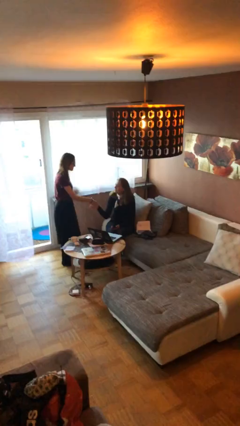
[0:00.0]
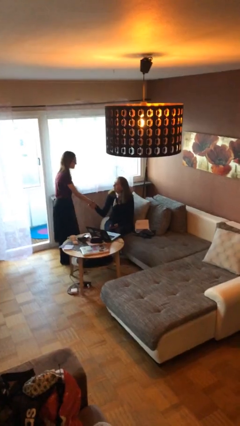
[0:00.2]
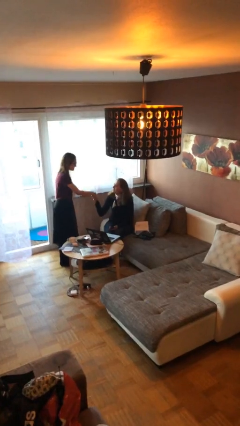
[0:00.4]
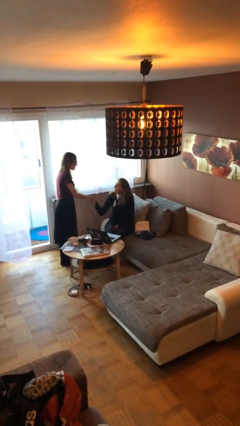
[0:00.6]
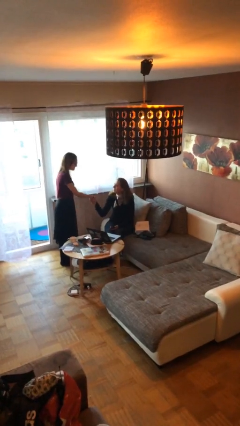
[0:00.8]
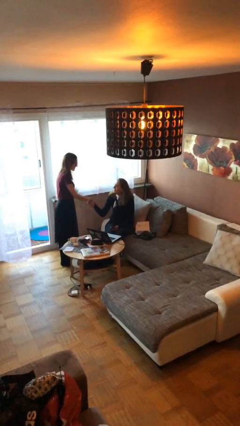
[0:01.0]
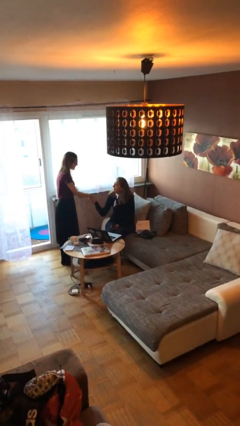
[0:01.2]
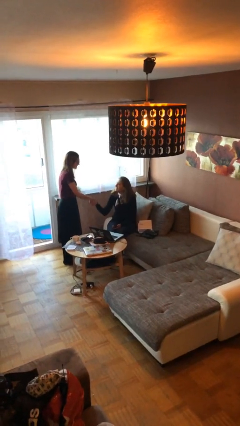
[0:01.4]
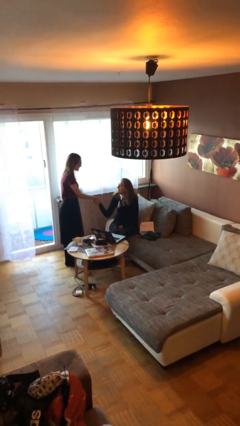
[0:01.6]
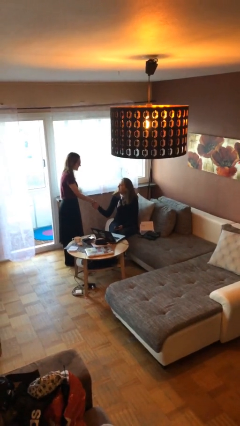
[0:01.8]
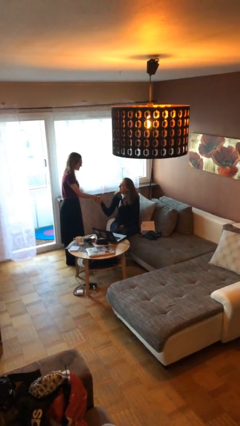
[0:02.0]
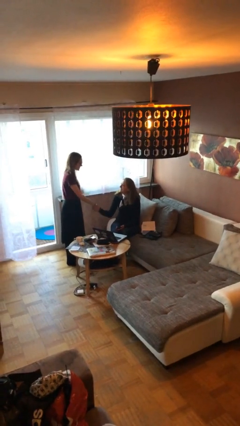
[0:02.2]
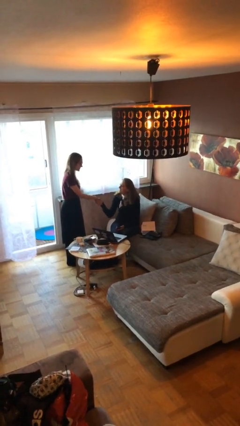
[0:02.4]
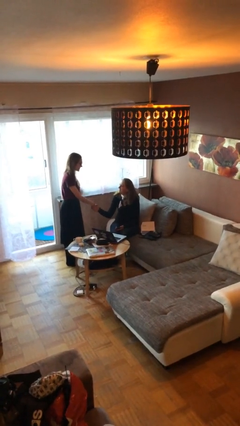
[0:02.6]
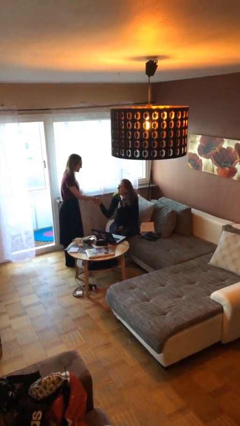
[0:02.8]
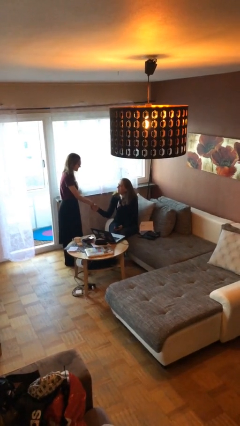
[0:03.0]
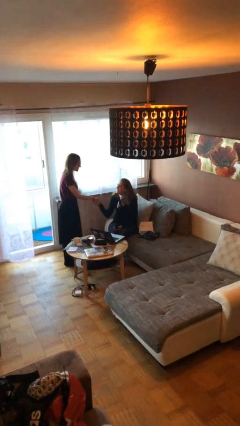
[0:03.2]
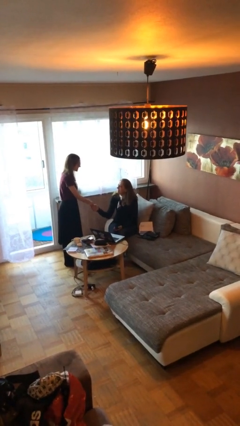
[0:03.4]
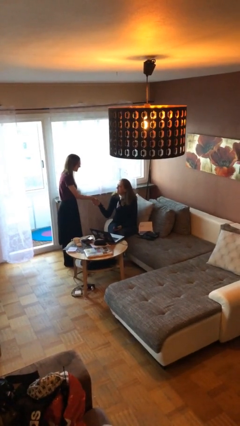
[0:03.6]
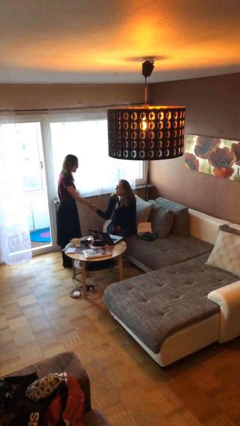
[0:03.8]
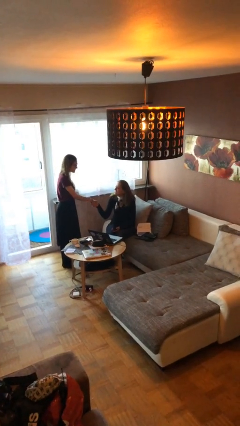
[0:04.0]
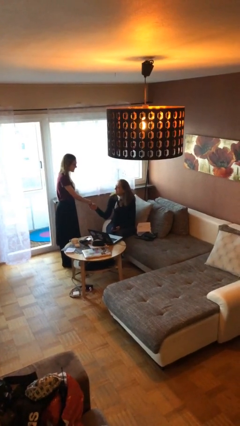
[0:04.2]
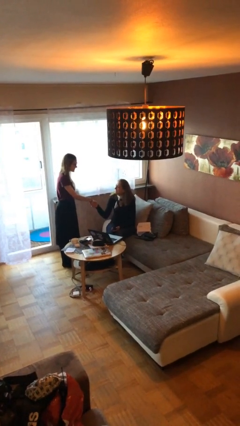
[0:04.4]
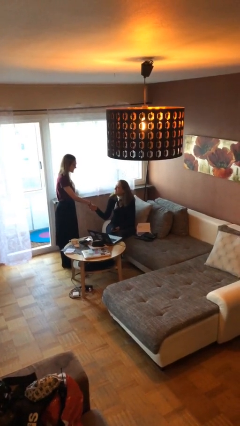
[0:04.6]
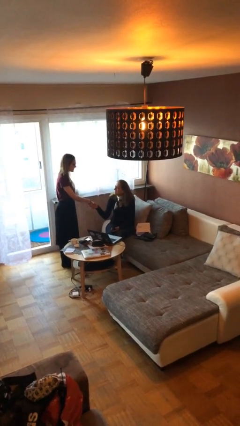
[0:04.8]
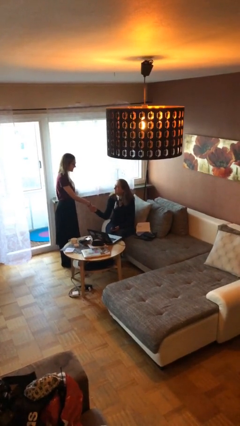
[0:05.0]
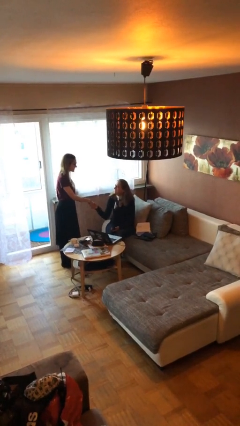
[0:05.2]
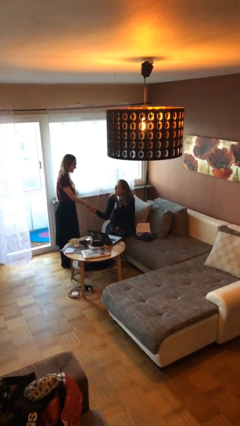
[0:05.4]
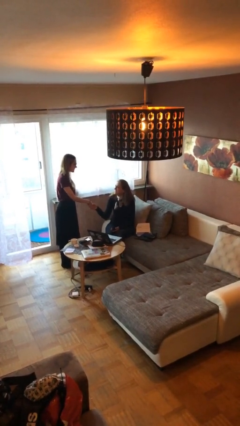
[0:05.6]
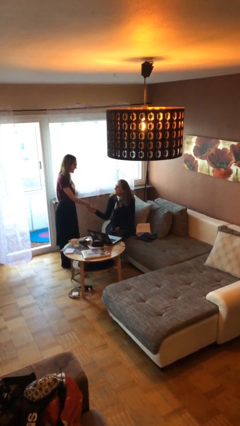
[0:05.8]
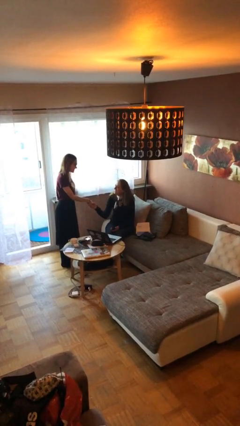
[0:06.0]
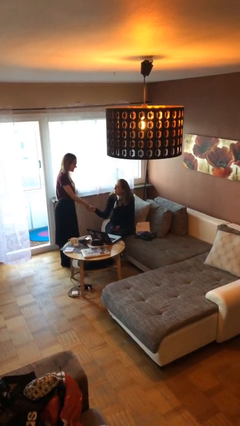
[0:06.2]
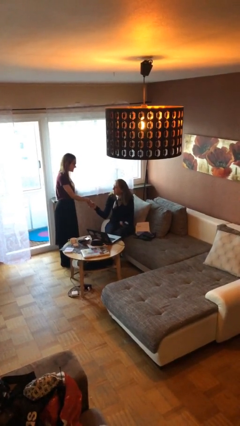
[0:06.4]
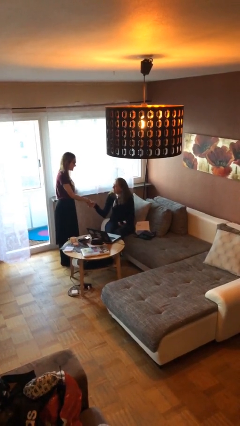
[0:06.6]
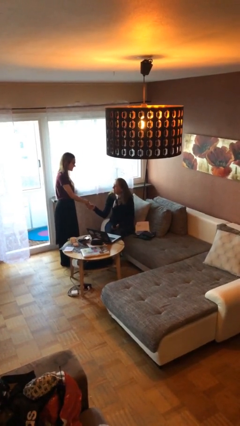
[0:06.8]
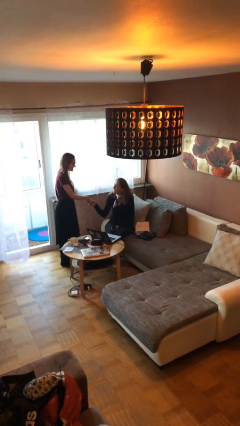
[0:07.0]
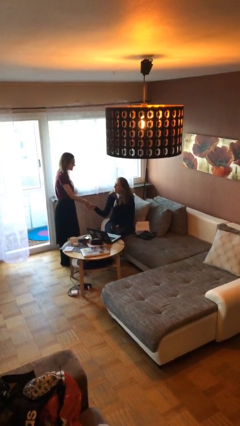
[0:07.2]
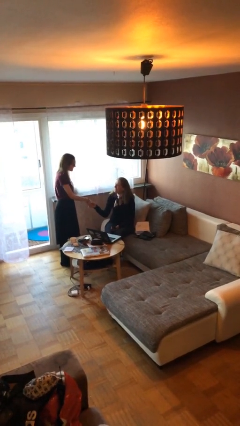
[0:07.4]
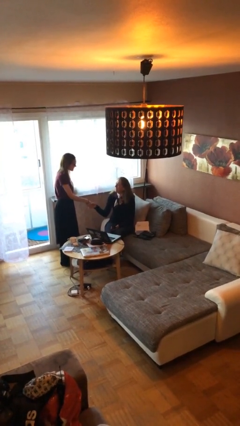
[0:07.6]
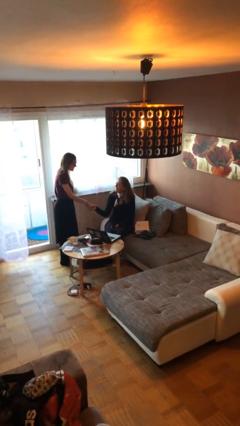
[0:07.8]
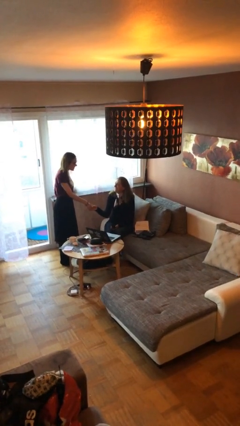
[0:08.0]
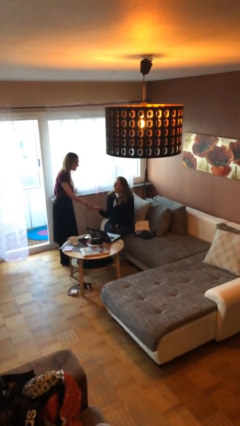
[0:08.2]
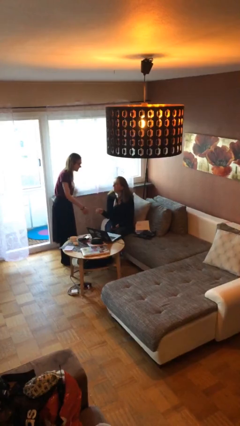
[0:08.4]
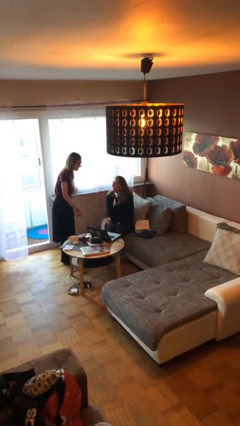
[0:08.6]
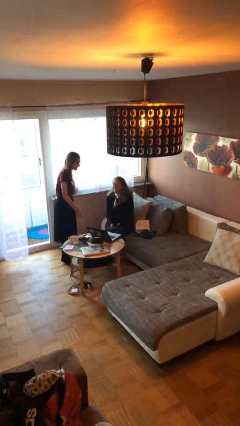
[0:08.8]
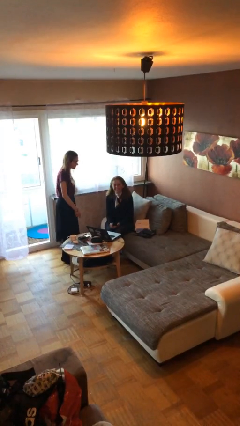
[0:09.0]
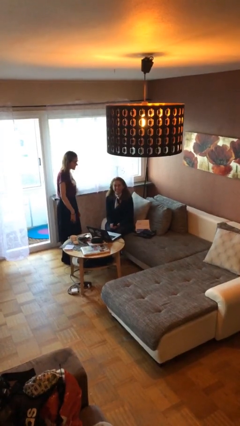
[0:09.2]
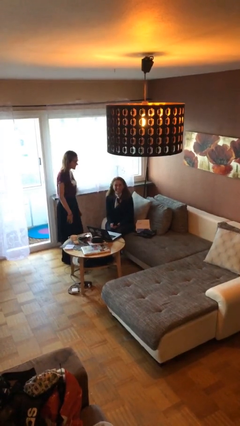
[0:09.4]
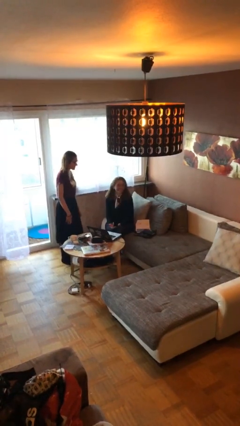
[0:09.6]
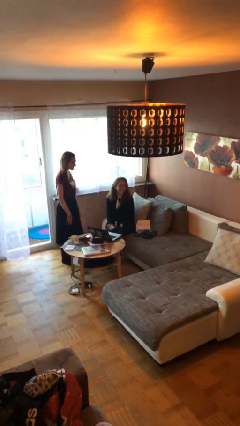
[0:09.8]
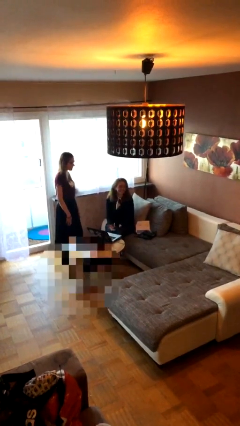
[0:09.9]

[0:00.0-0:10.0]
person shakes hand

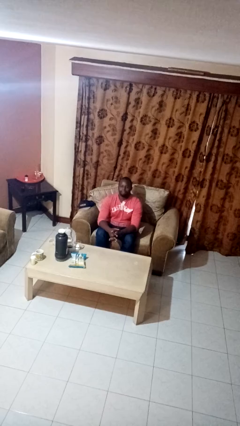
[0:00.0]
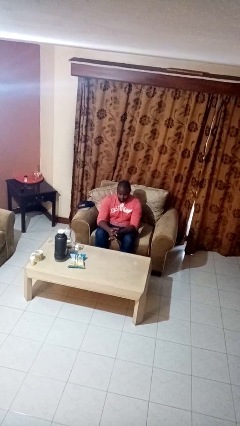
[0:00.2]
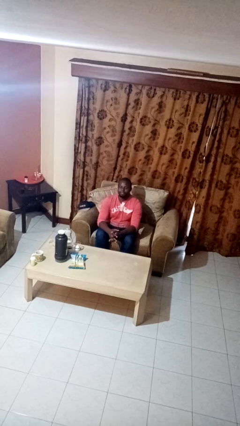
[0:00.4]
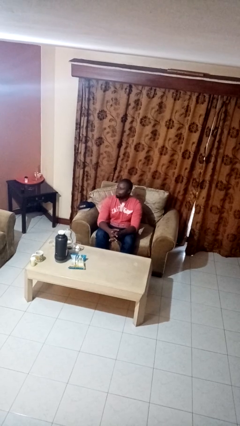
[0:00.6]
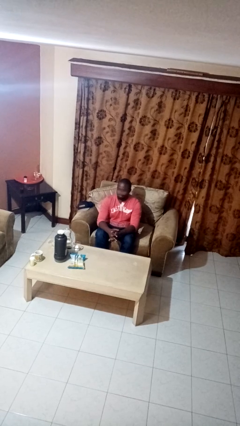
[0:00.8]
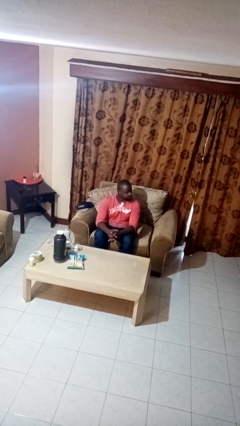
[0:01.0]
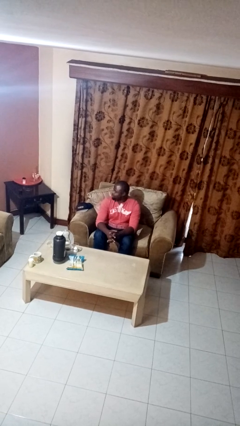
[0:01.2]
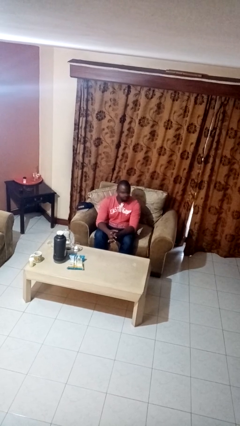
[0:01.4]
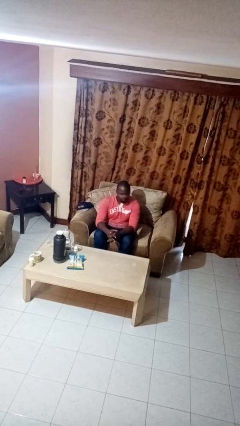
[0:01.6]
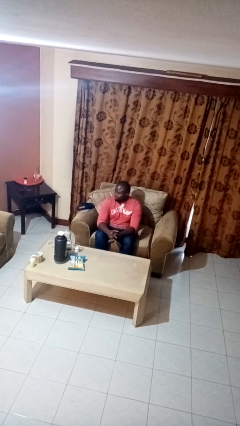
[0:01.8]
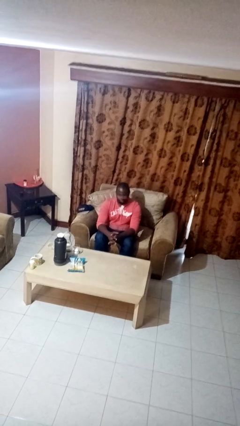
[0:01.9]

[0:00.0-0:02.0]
person shakes head

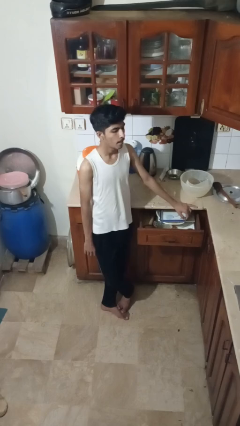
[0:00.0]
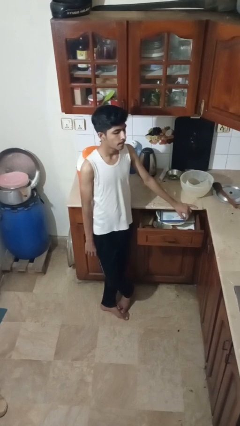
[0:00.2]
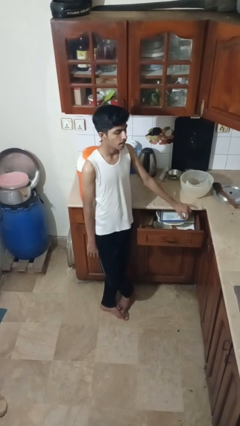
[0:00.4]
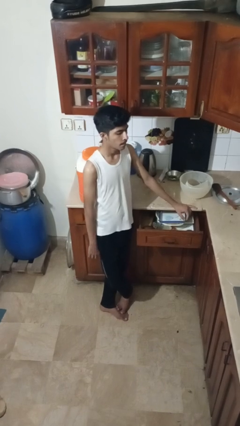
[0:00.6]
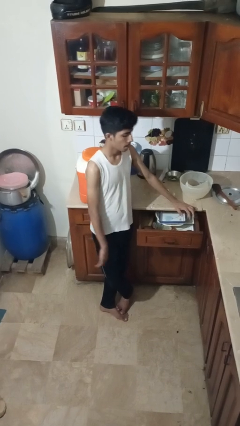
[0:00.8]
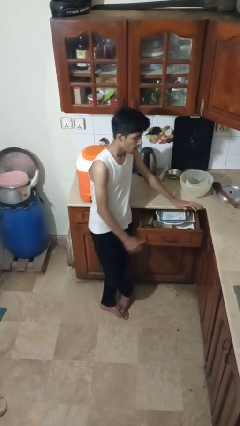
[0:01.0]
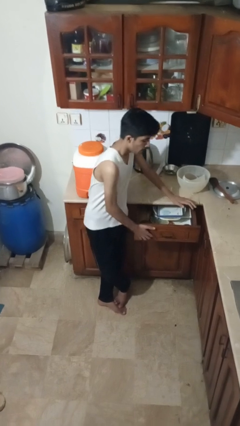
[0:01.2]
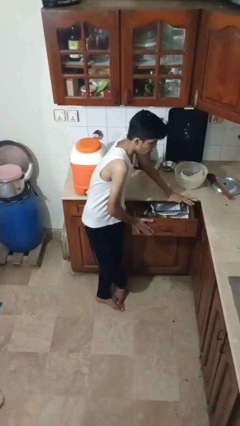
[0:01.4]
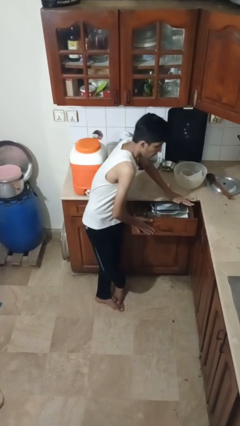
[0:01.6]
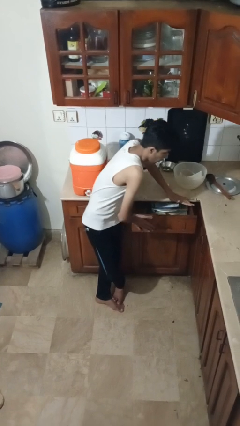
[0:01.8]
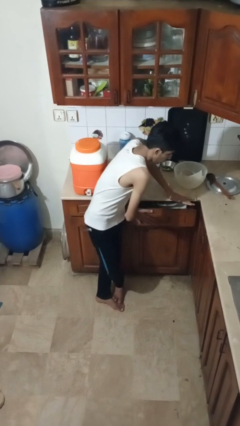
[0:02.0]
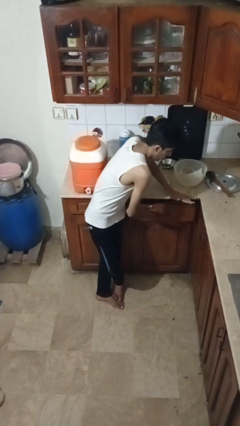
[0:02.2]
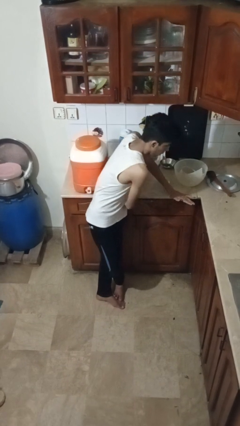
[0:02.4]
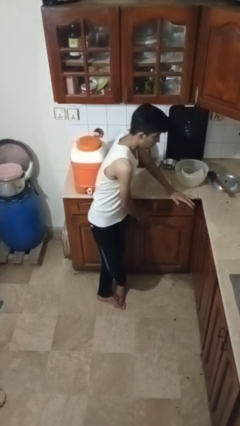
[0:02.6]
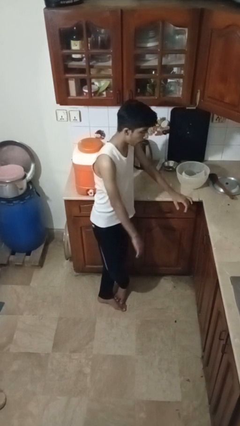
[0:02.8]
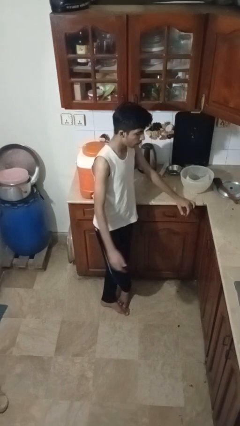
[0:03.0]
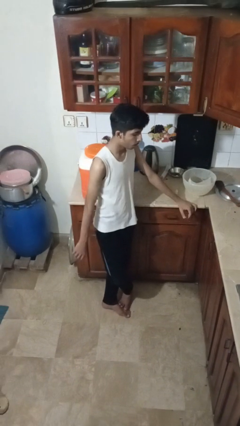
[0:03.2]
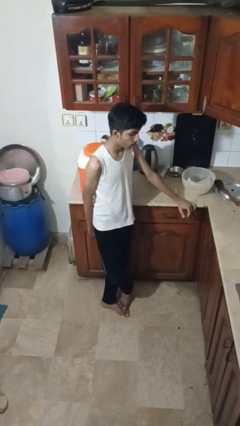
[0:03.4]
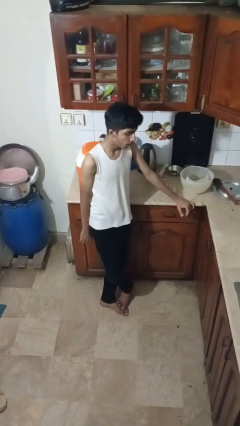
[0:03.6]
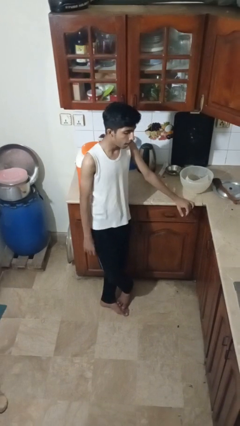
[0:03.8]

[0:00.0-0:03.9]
person closes kitchen drawer

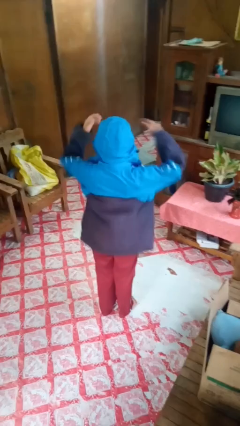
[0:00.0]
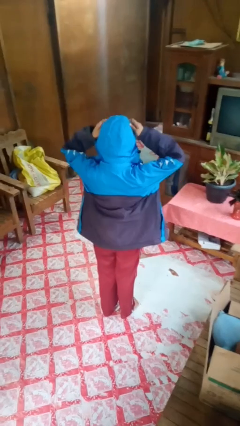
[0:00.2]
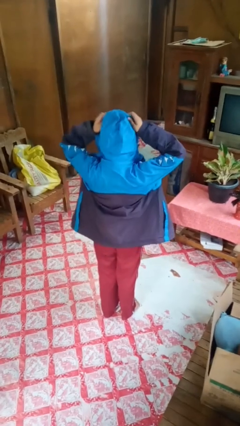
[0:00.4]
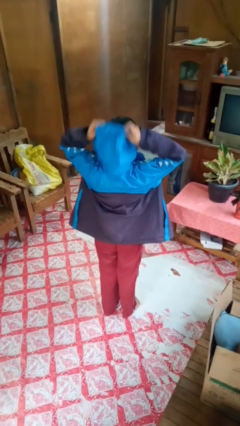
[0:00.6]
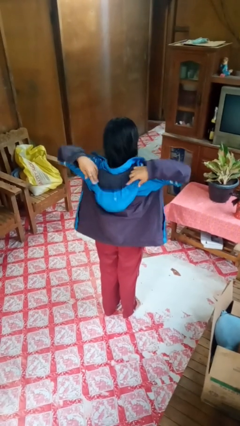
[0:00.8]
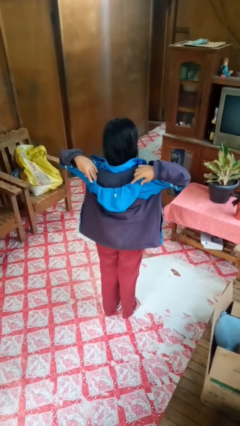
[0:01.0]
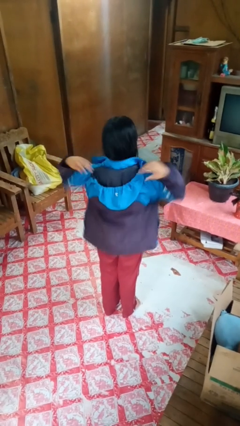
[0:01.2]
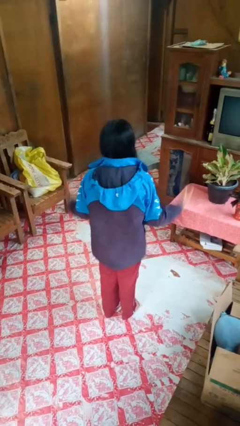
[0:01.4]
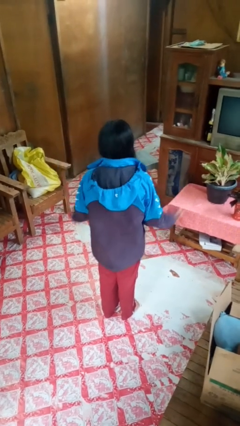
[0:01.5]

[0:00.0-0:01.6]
person takes off hoodie

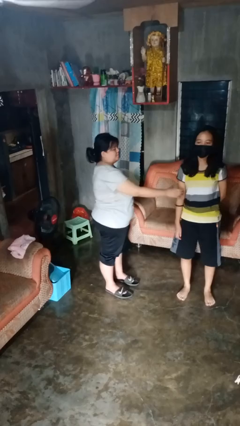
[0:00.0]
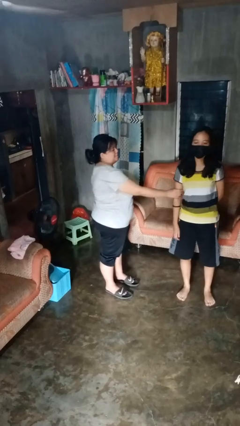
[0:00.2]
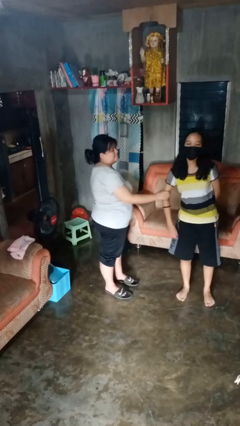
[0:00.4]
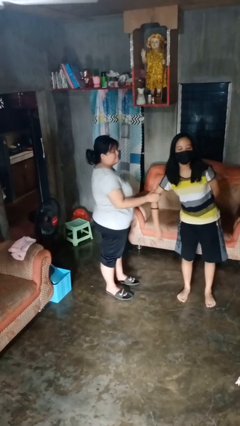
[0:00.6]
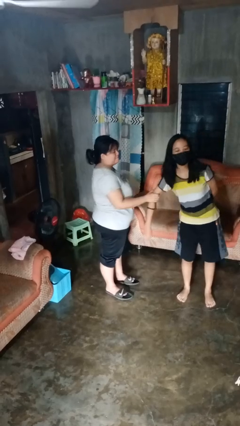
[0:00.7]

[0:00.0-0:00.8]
person grabs person by bicep
